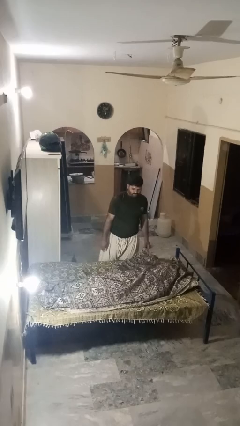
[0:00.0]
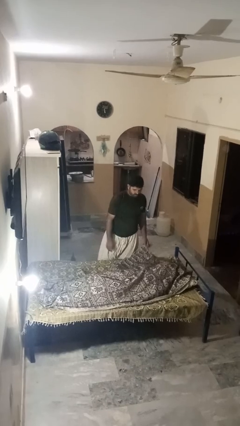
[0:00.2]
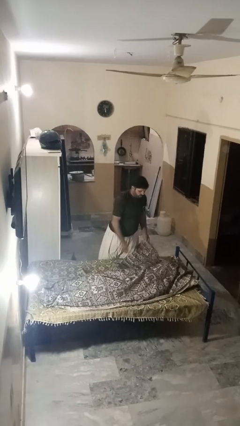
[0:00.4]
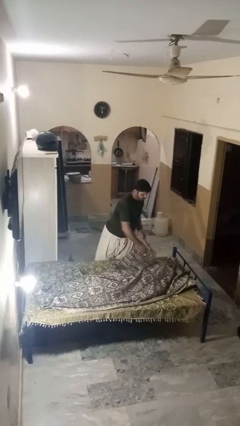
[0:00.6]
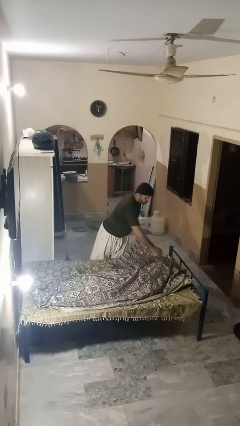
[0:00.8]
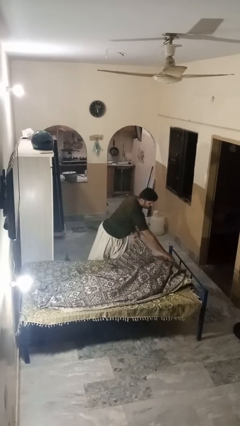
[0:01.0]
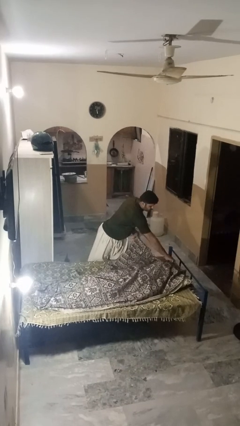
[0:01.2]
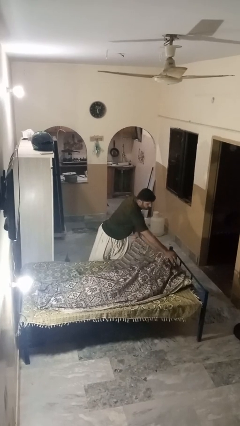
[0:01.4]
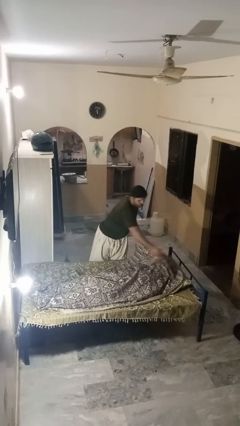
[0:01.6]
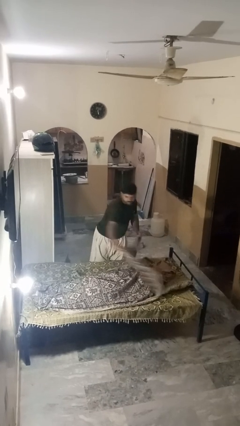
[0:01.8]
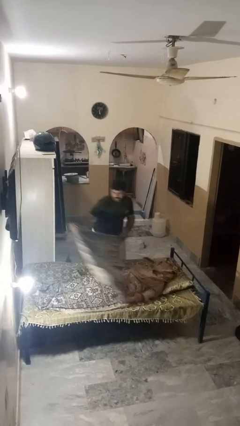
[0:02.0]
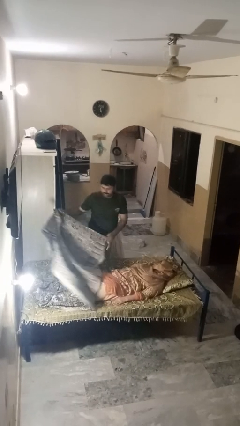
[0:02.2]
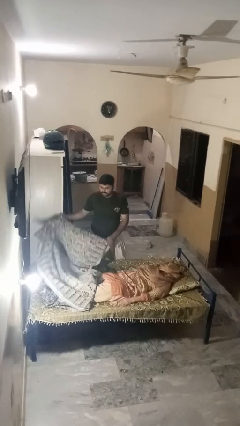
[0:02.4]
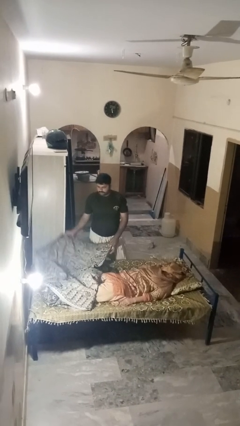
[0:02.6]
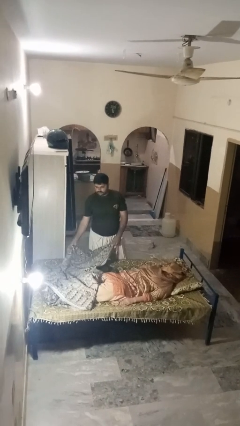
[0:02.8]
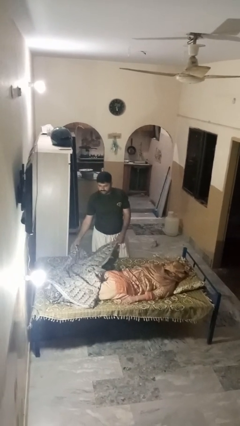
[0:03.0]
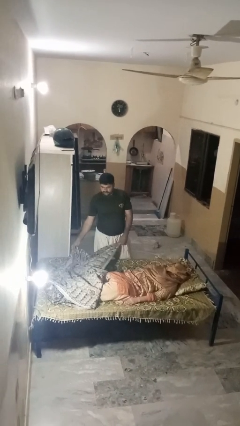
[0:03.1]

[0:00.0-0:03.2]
person uncovers friend with blanket

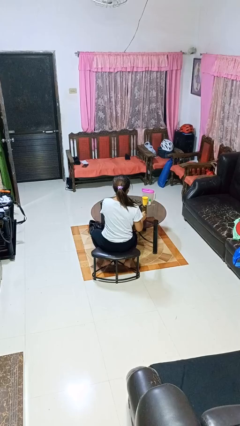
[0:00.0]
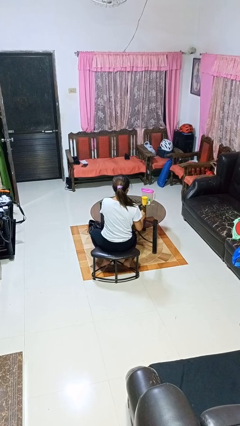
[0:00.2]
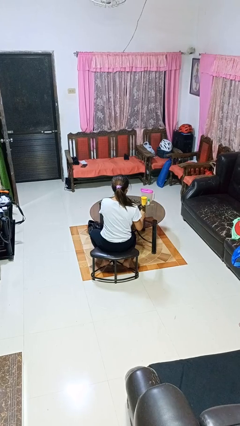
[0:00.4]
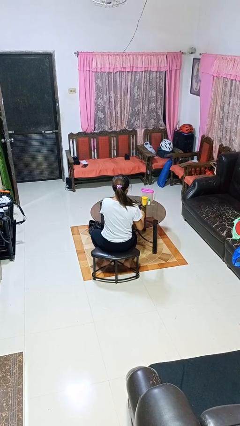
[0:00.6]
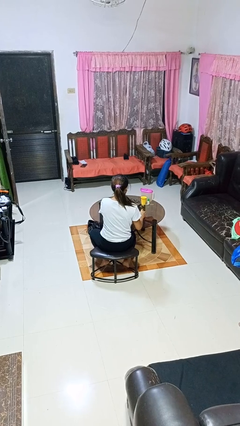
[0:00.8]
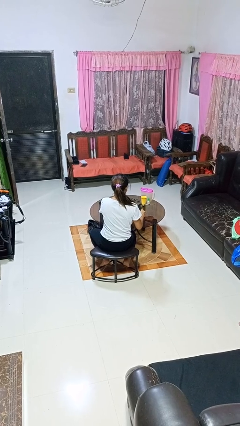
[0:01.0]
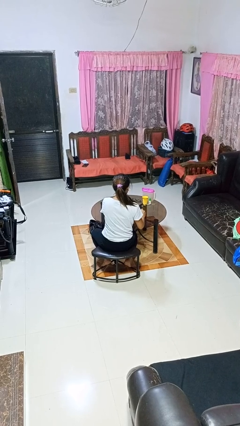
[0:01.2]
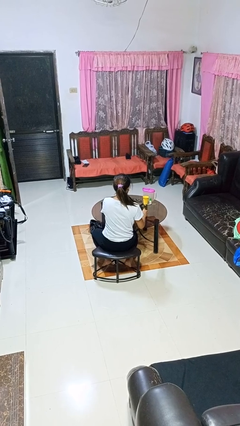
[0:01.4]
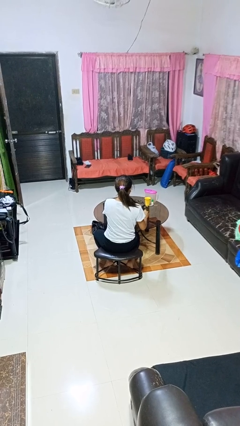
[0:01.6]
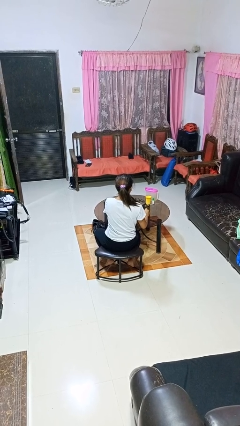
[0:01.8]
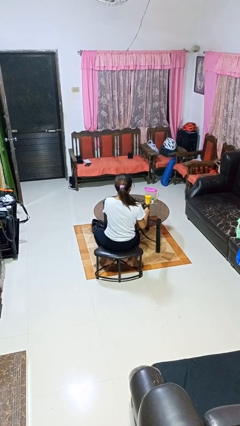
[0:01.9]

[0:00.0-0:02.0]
person stirs mug

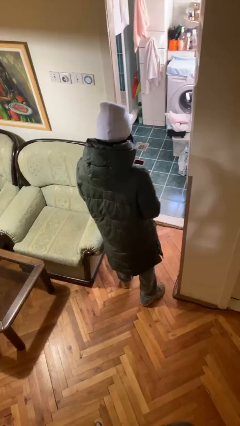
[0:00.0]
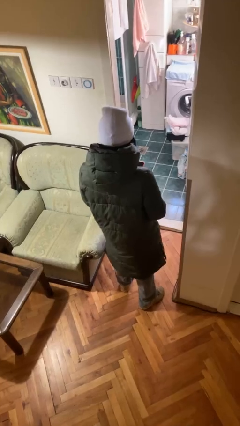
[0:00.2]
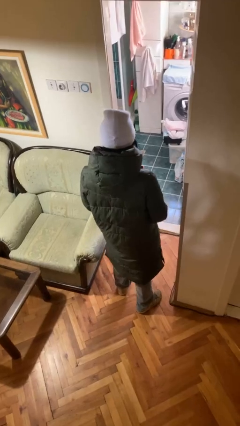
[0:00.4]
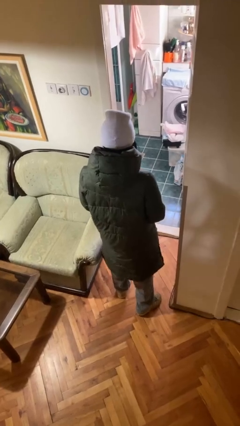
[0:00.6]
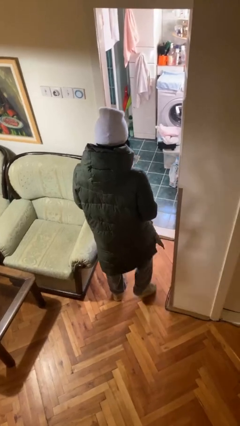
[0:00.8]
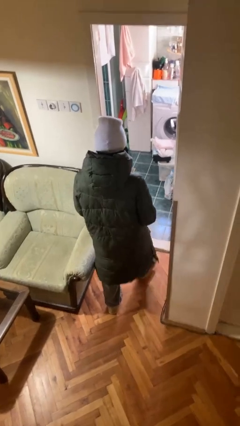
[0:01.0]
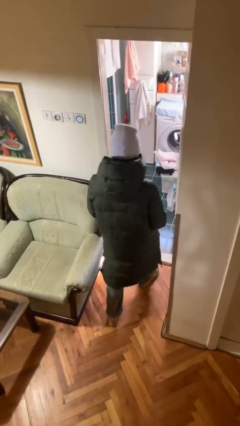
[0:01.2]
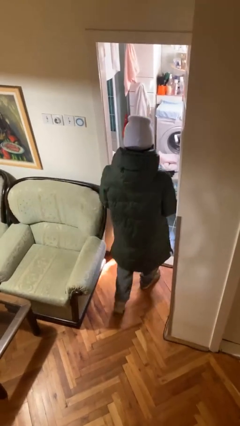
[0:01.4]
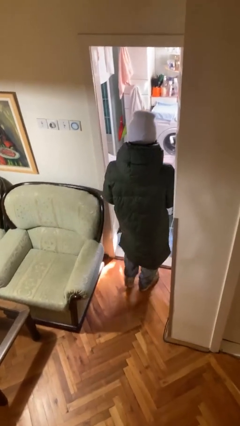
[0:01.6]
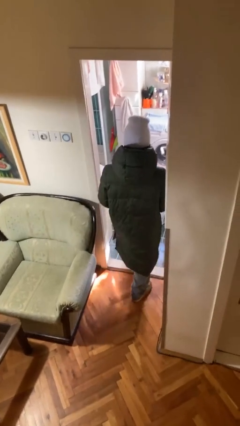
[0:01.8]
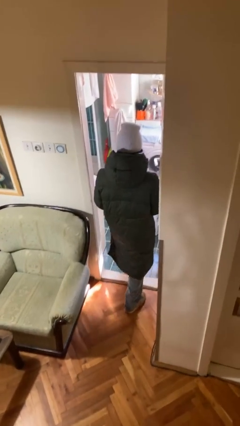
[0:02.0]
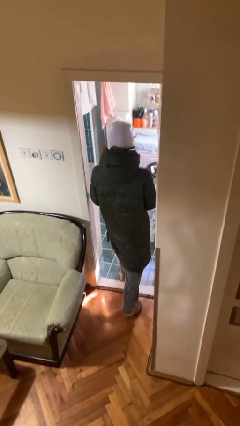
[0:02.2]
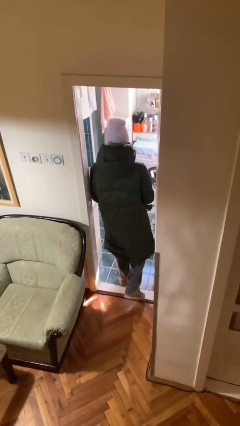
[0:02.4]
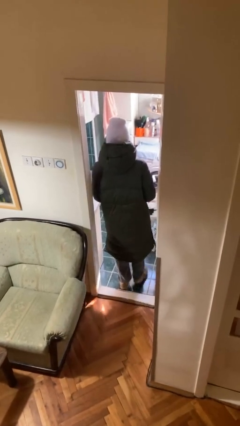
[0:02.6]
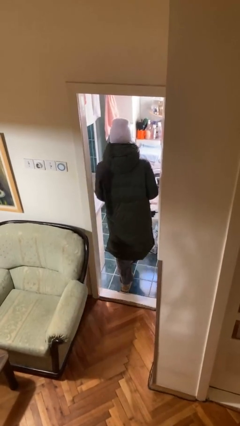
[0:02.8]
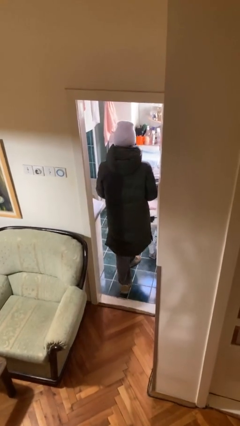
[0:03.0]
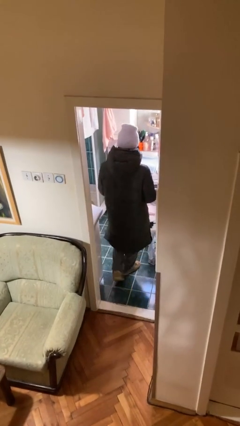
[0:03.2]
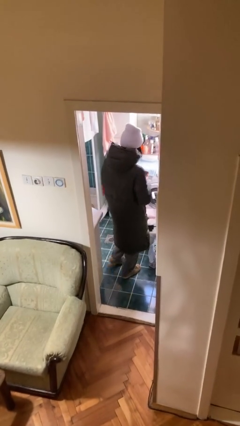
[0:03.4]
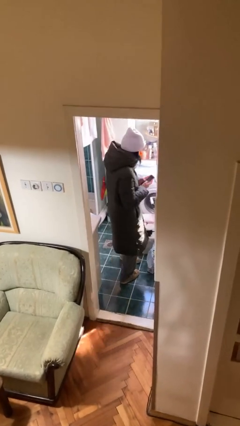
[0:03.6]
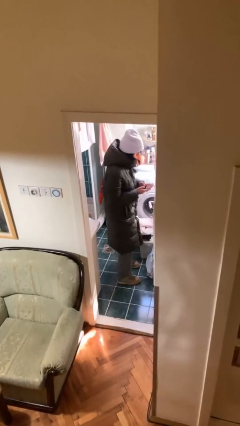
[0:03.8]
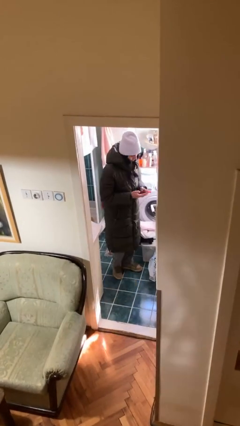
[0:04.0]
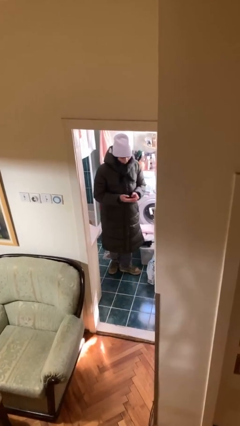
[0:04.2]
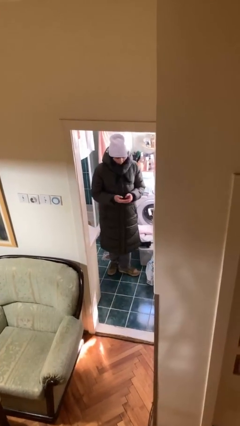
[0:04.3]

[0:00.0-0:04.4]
person exits scene through structure

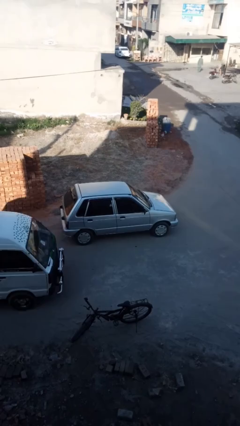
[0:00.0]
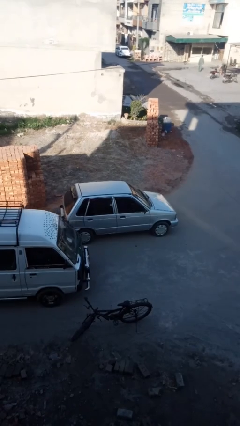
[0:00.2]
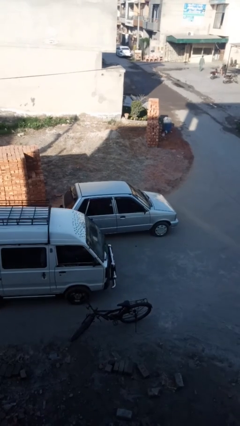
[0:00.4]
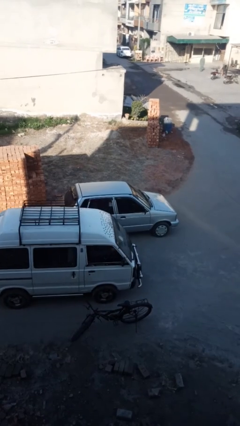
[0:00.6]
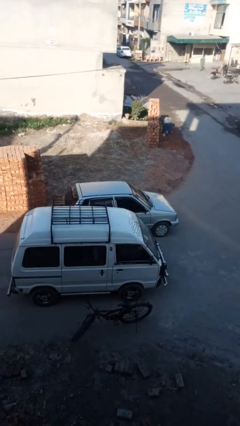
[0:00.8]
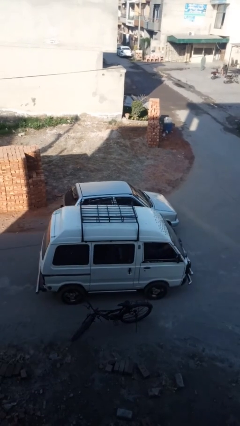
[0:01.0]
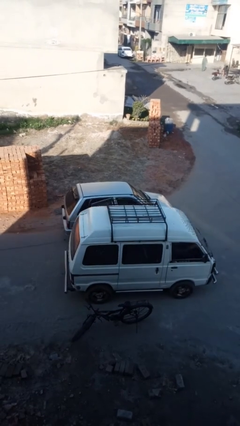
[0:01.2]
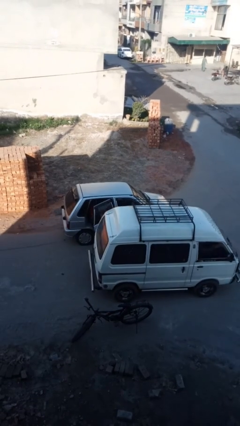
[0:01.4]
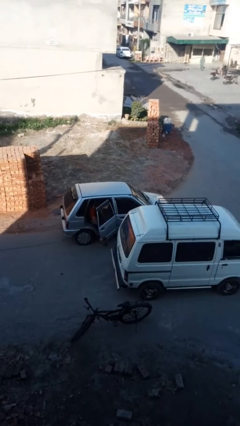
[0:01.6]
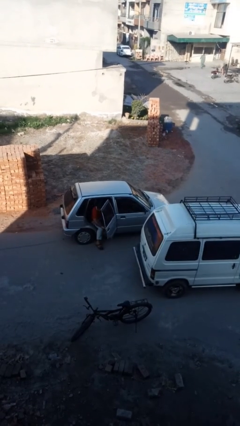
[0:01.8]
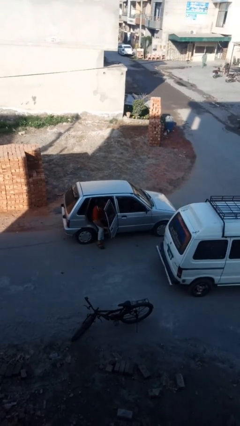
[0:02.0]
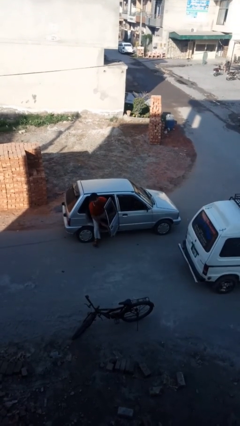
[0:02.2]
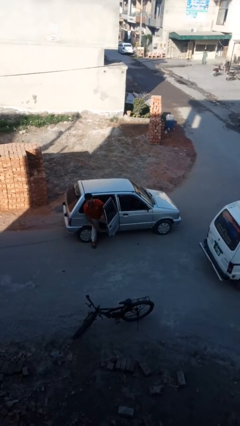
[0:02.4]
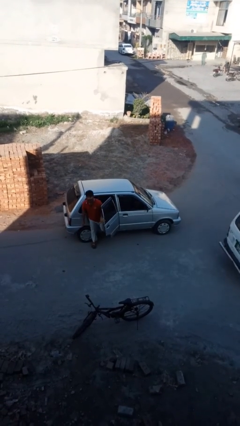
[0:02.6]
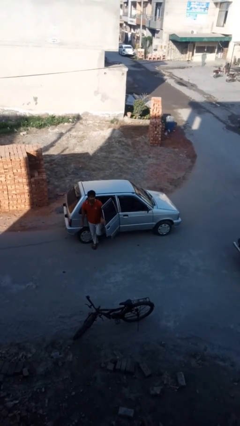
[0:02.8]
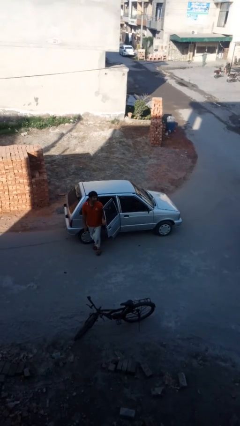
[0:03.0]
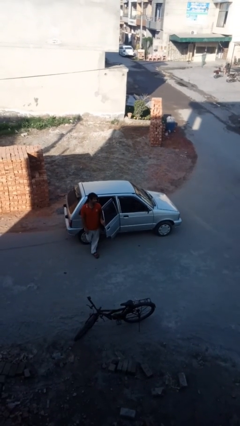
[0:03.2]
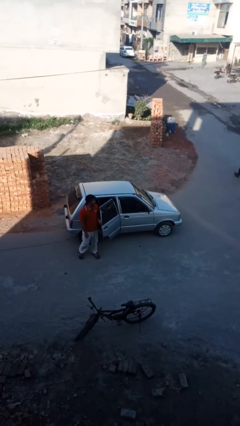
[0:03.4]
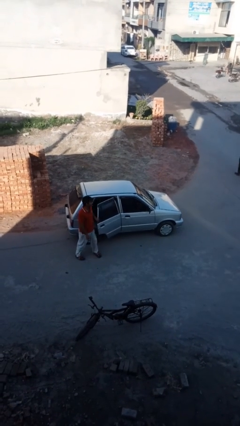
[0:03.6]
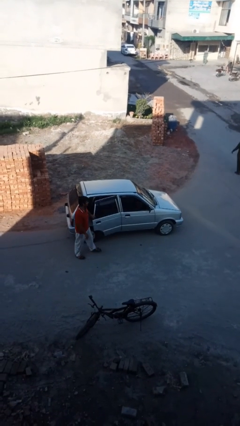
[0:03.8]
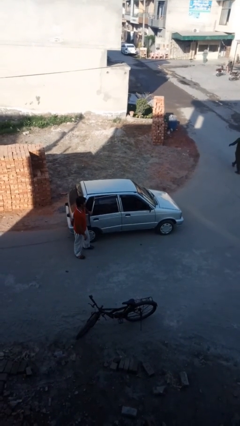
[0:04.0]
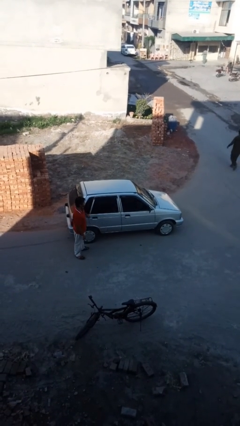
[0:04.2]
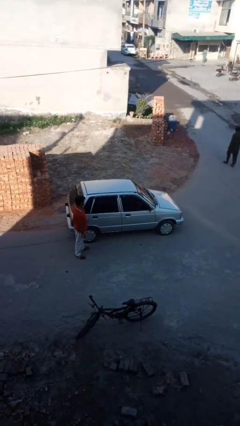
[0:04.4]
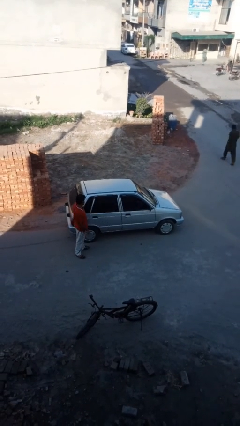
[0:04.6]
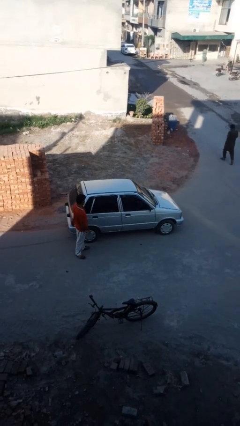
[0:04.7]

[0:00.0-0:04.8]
car drops off person

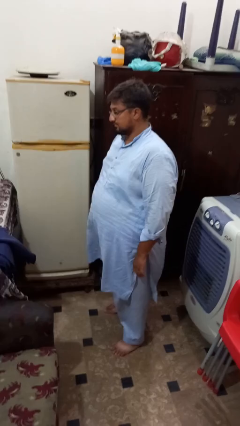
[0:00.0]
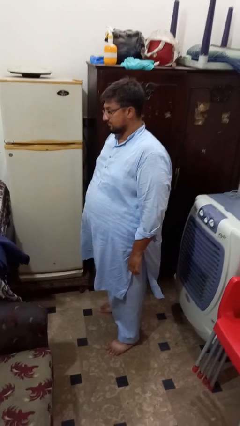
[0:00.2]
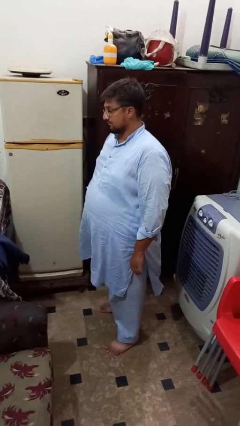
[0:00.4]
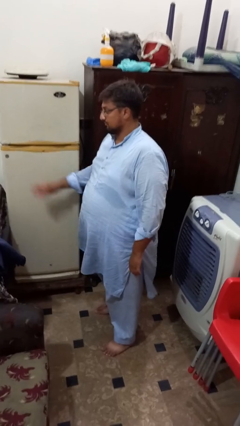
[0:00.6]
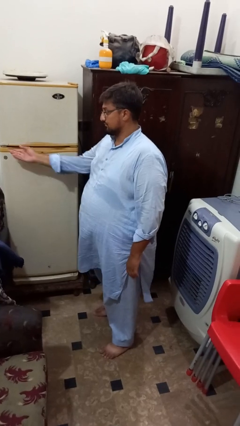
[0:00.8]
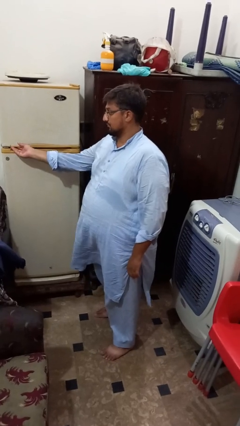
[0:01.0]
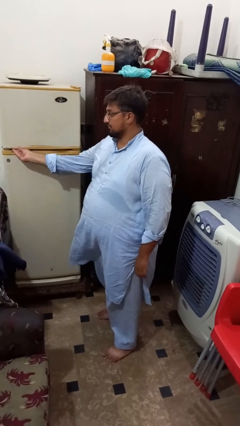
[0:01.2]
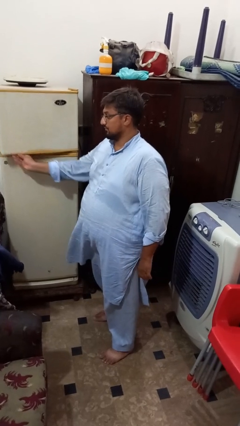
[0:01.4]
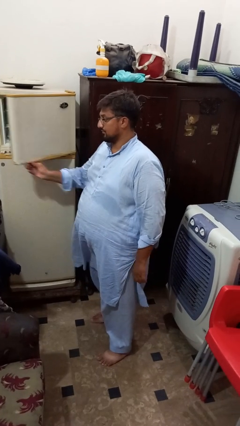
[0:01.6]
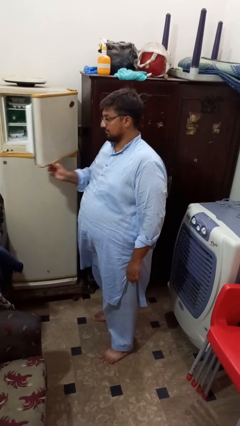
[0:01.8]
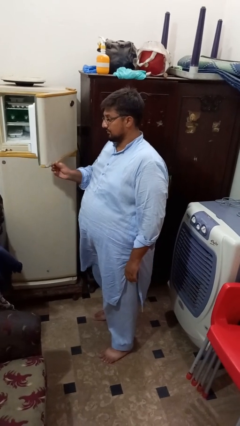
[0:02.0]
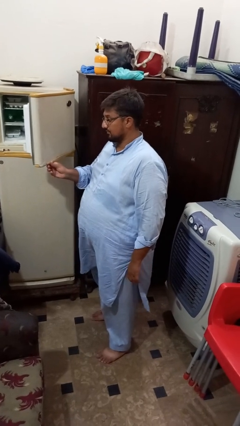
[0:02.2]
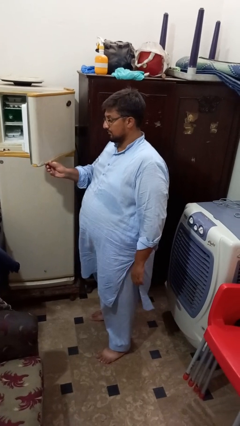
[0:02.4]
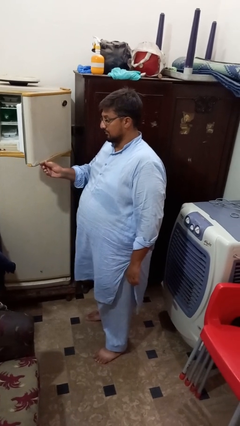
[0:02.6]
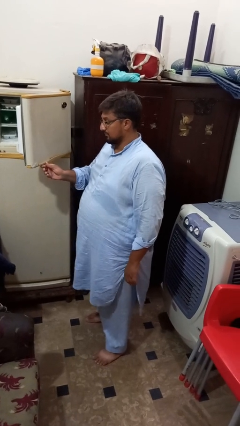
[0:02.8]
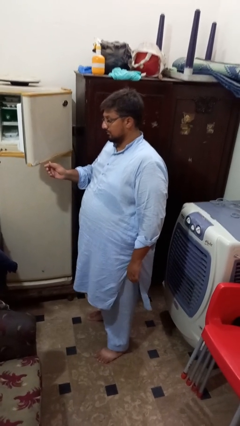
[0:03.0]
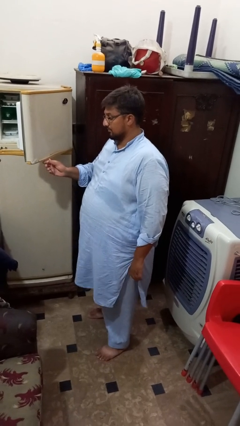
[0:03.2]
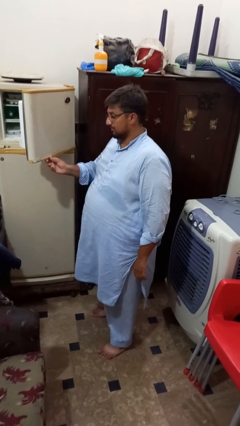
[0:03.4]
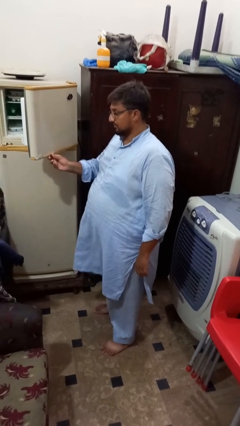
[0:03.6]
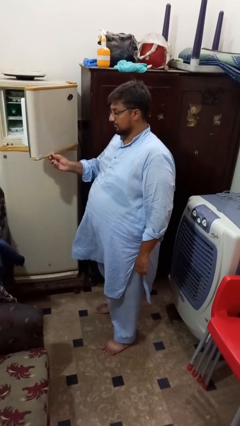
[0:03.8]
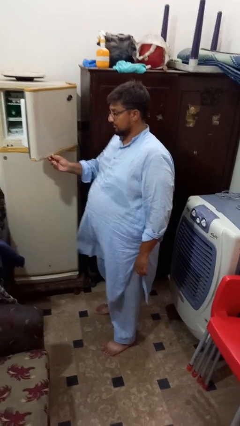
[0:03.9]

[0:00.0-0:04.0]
person opens refrigerator
